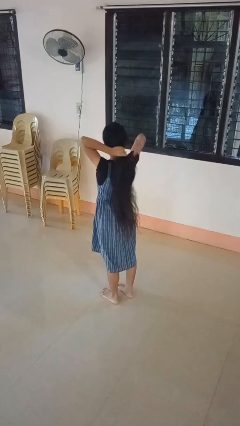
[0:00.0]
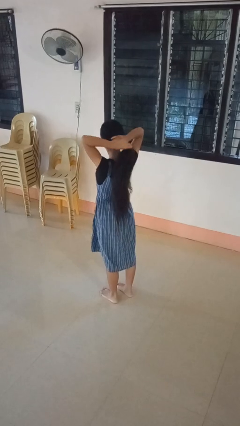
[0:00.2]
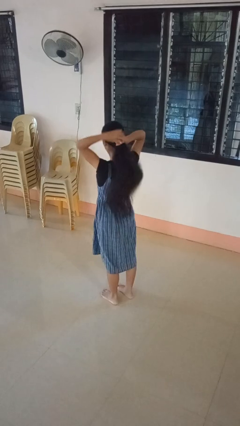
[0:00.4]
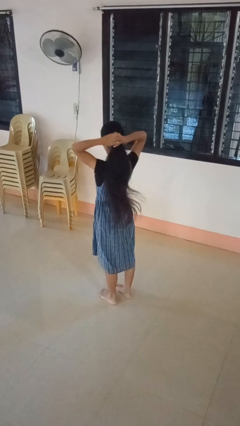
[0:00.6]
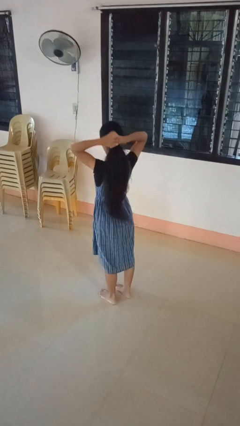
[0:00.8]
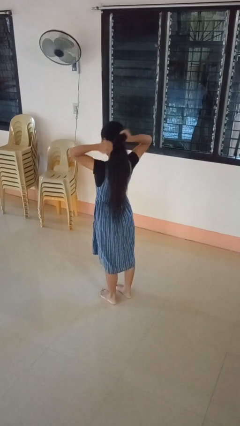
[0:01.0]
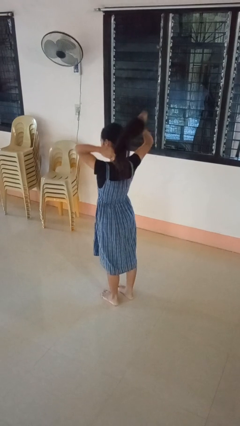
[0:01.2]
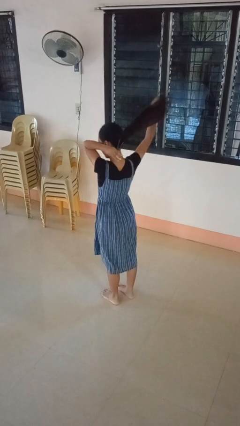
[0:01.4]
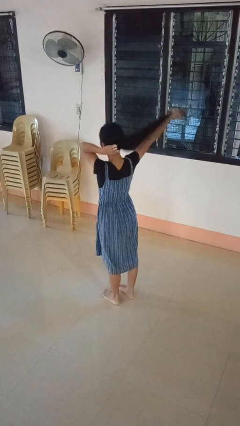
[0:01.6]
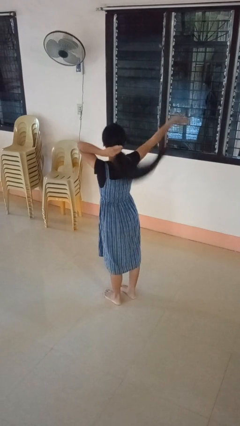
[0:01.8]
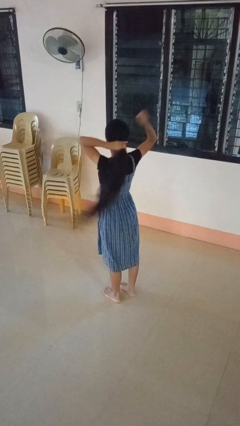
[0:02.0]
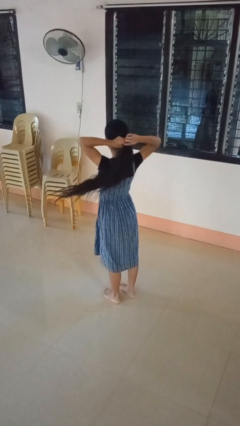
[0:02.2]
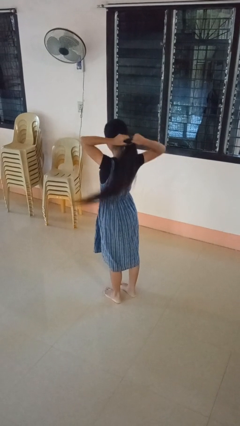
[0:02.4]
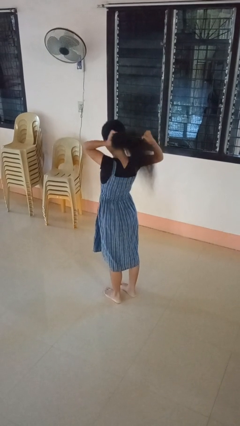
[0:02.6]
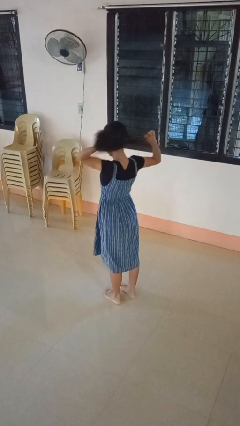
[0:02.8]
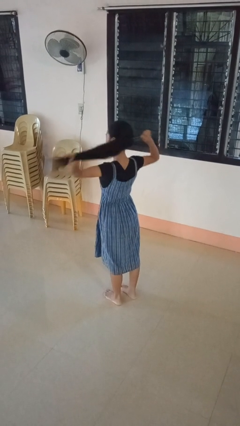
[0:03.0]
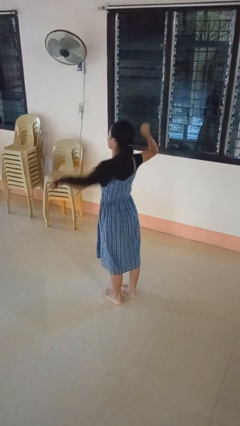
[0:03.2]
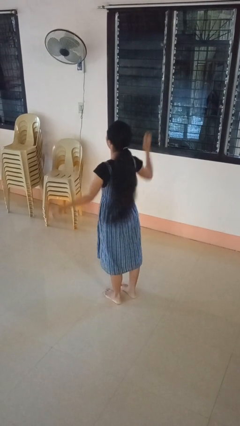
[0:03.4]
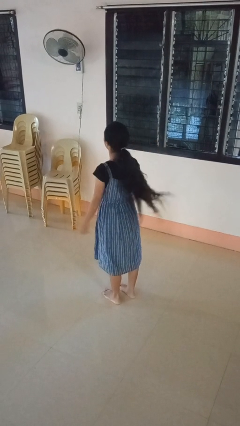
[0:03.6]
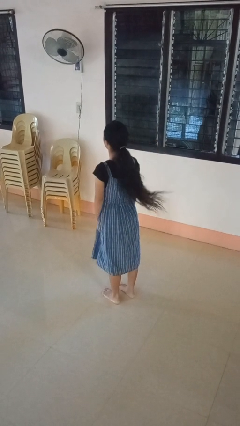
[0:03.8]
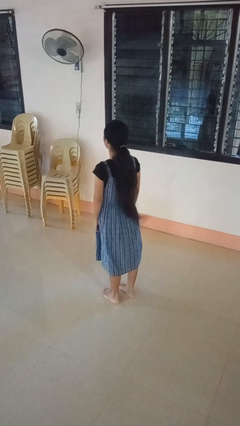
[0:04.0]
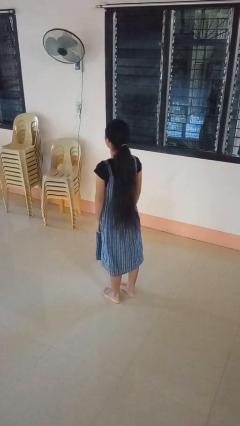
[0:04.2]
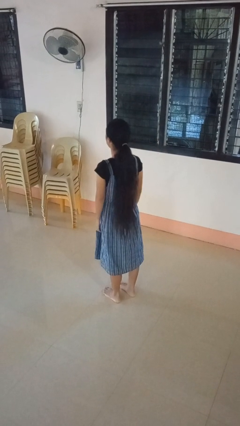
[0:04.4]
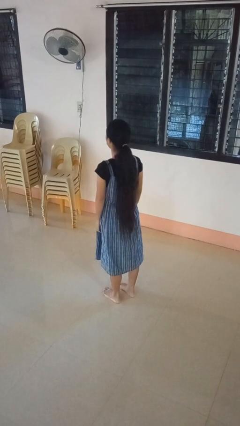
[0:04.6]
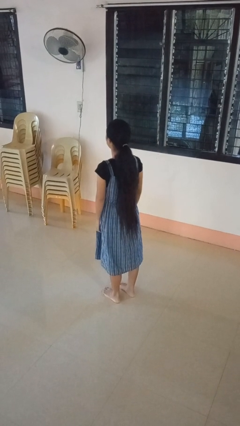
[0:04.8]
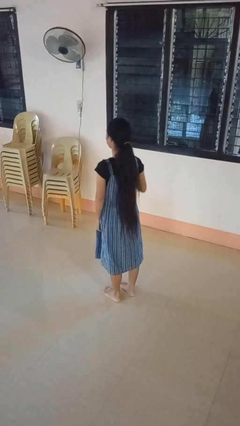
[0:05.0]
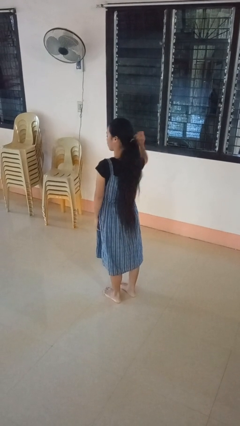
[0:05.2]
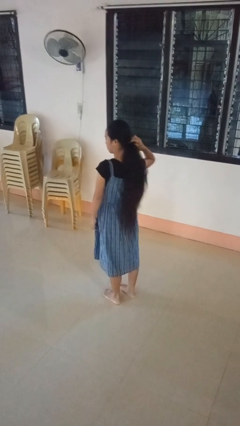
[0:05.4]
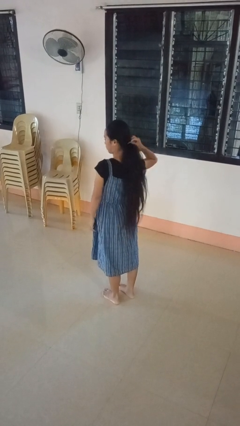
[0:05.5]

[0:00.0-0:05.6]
person puts hair in ponytail

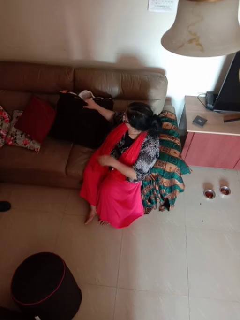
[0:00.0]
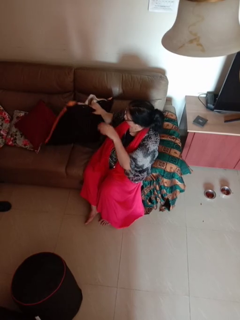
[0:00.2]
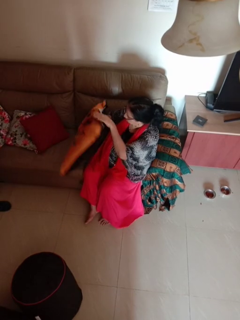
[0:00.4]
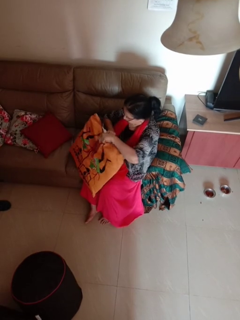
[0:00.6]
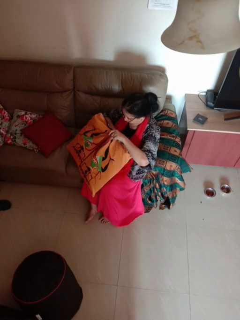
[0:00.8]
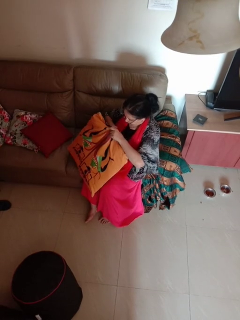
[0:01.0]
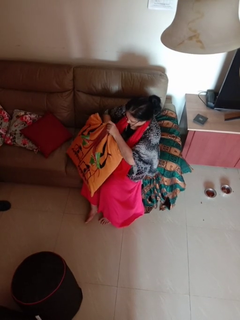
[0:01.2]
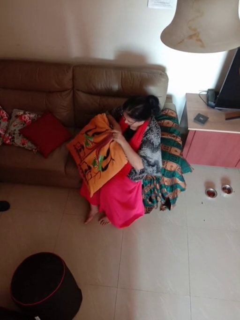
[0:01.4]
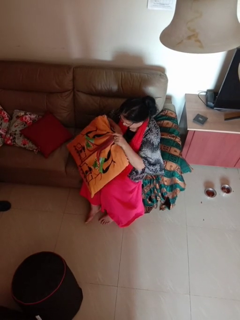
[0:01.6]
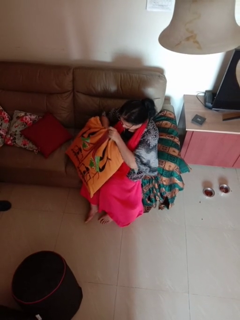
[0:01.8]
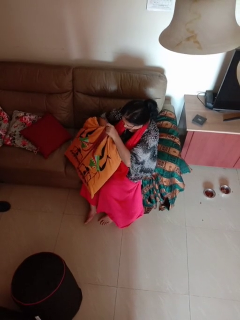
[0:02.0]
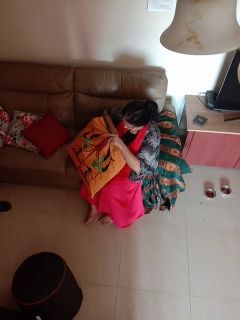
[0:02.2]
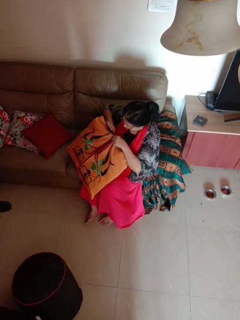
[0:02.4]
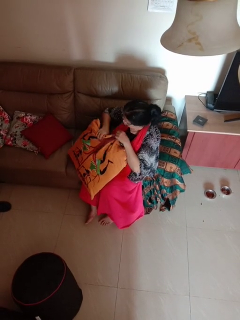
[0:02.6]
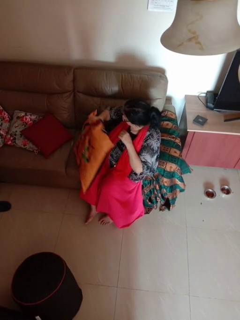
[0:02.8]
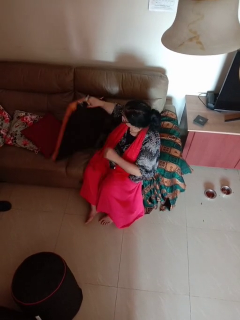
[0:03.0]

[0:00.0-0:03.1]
person searches in couch

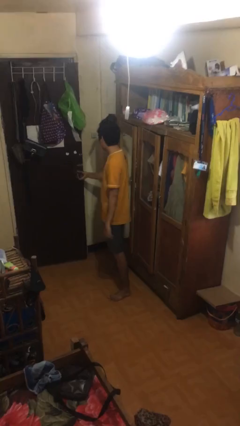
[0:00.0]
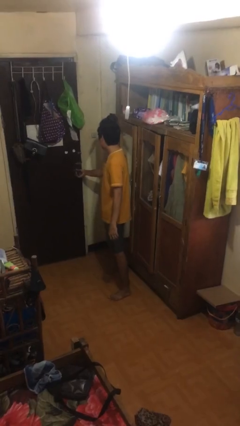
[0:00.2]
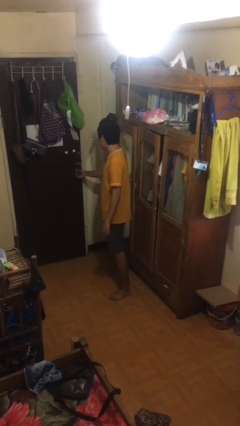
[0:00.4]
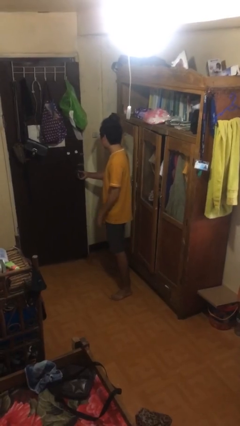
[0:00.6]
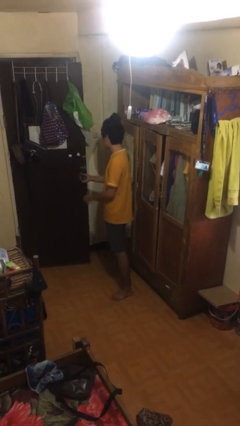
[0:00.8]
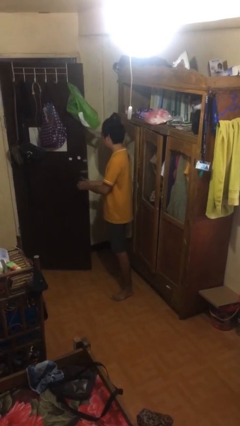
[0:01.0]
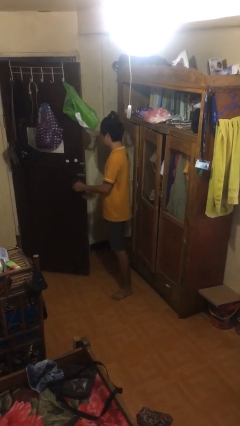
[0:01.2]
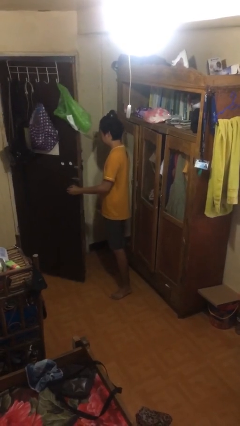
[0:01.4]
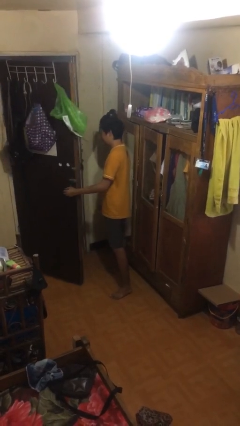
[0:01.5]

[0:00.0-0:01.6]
person opens facility door

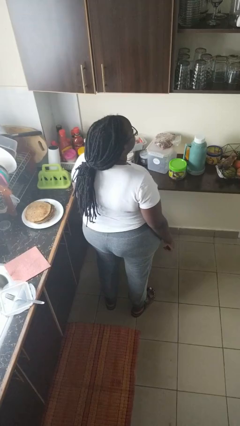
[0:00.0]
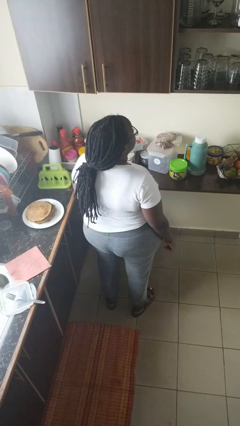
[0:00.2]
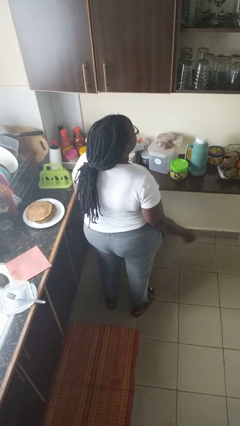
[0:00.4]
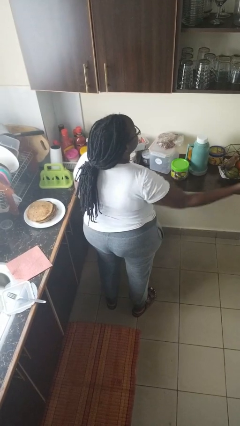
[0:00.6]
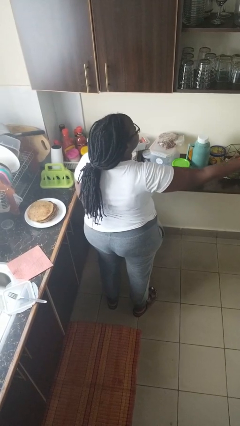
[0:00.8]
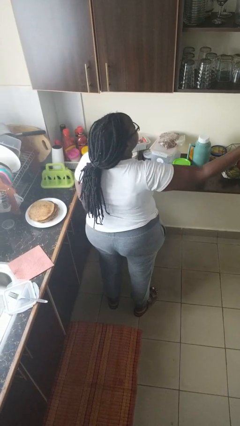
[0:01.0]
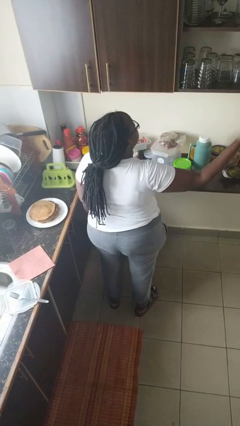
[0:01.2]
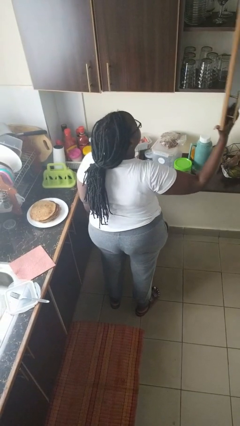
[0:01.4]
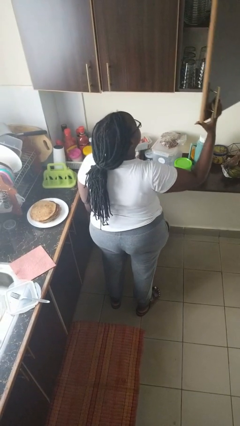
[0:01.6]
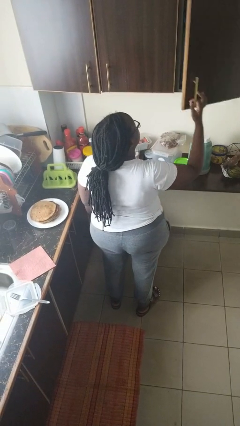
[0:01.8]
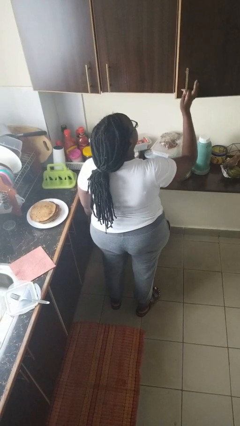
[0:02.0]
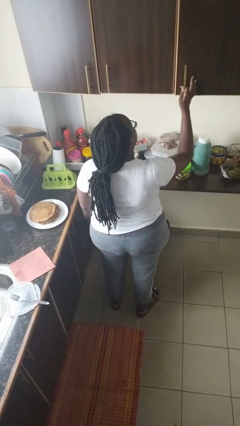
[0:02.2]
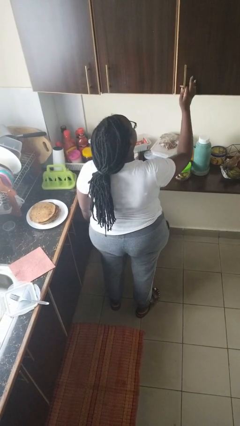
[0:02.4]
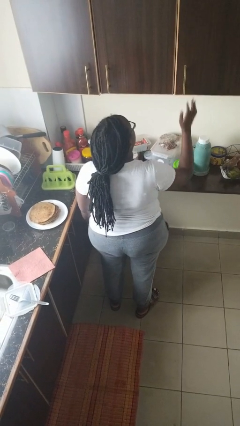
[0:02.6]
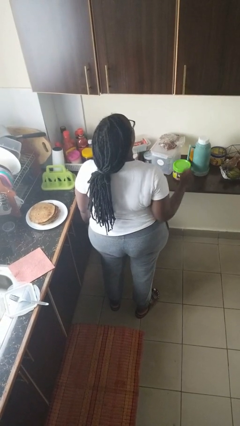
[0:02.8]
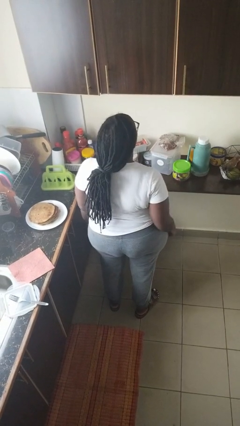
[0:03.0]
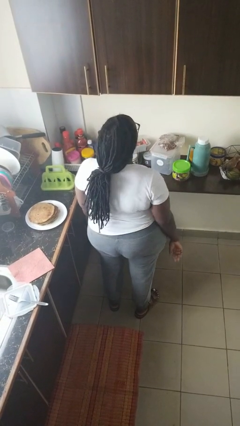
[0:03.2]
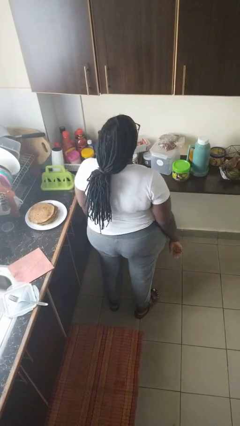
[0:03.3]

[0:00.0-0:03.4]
person closes cabinet

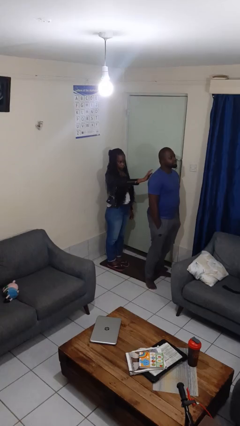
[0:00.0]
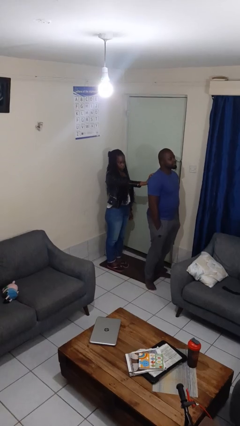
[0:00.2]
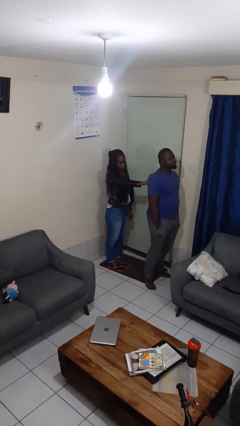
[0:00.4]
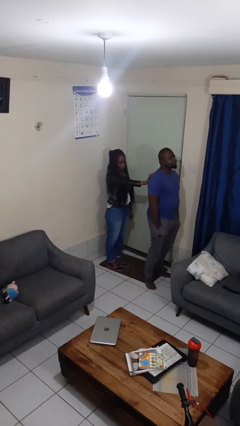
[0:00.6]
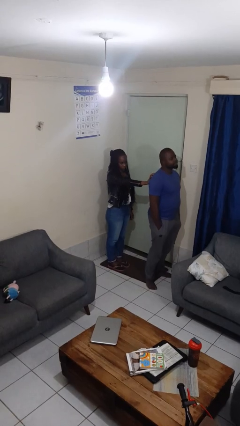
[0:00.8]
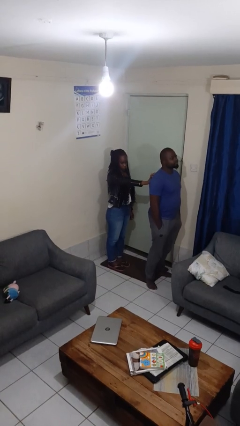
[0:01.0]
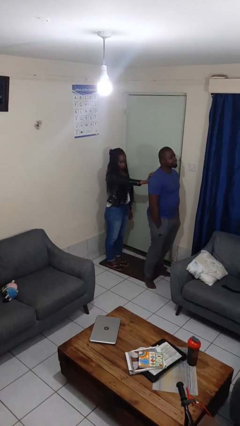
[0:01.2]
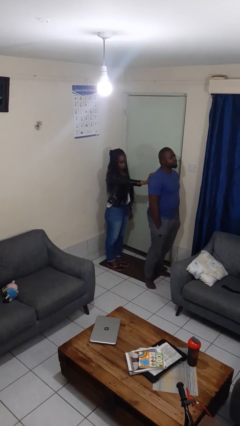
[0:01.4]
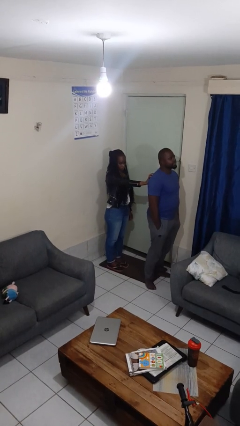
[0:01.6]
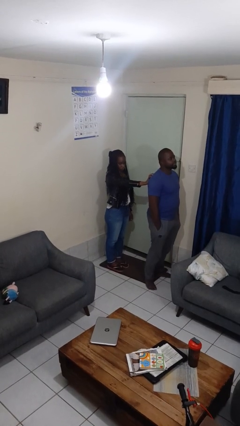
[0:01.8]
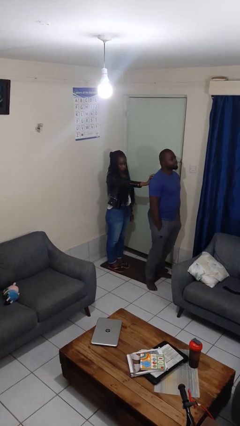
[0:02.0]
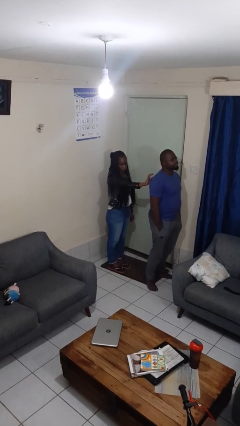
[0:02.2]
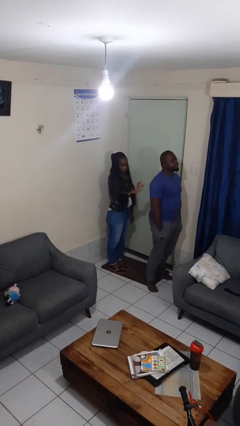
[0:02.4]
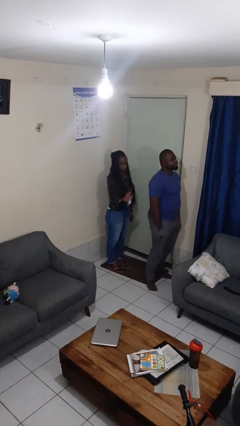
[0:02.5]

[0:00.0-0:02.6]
person touches back of person

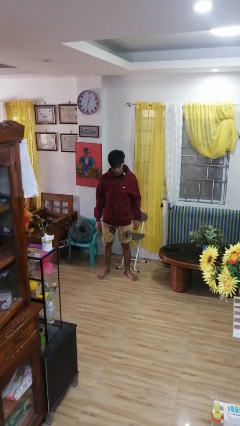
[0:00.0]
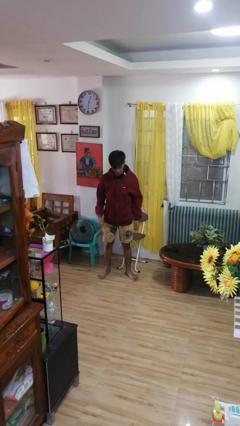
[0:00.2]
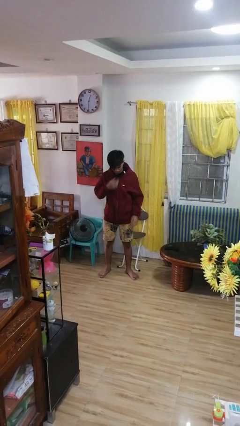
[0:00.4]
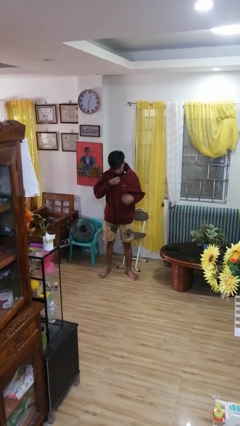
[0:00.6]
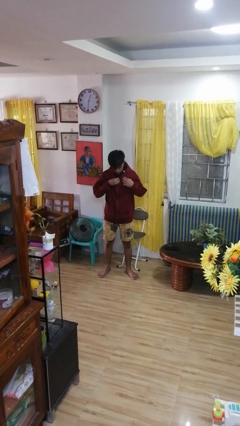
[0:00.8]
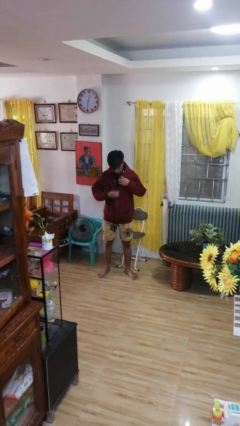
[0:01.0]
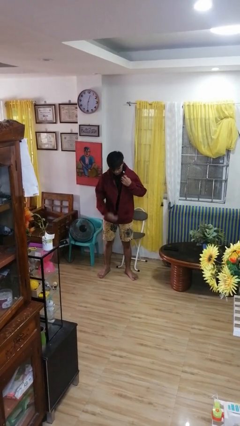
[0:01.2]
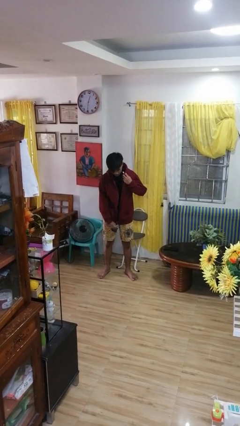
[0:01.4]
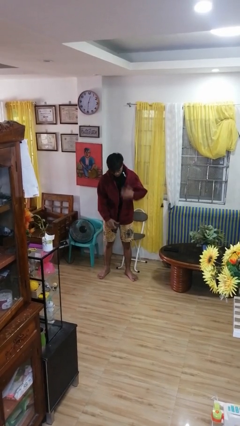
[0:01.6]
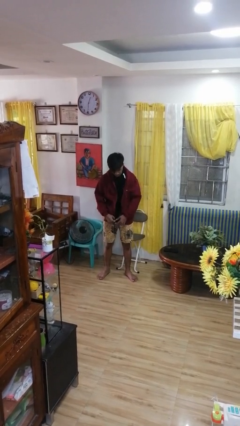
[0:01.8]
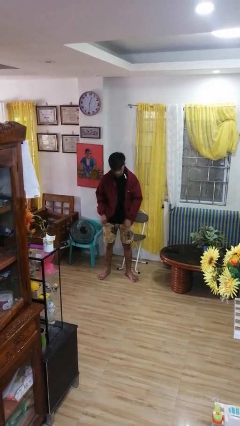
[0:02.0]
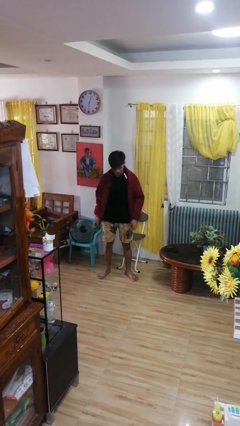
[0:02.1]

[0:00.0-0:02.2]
person unzips jacket
